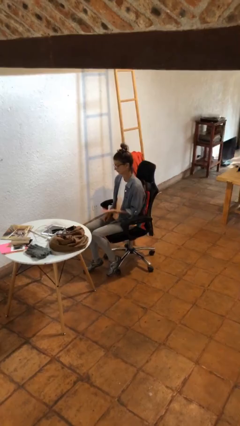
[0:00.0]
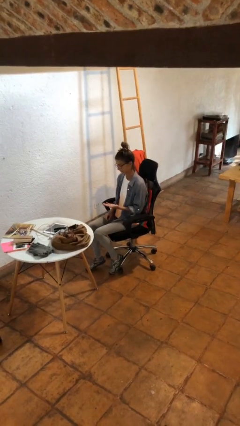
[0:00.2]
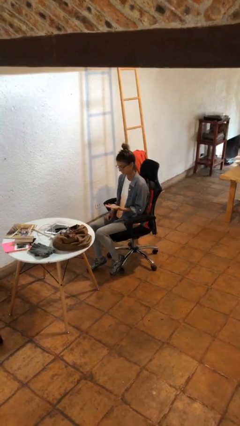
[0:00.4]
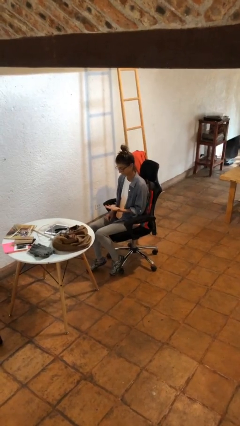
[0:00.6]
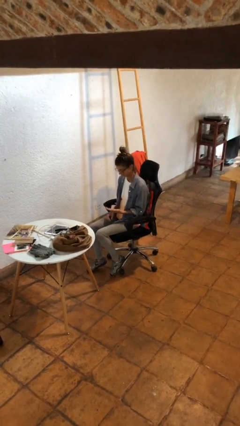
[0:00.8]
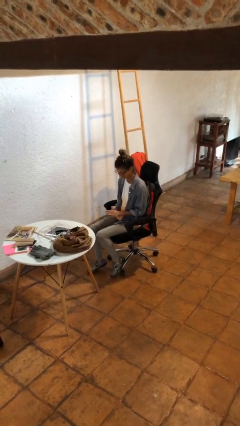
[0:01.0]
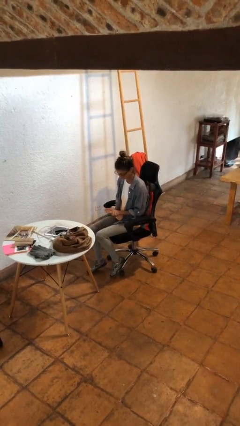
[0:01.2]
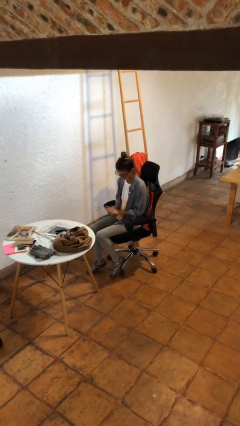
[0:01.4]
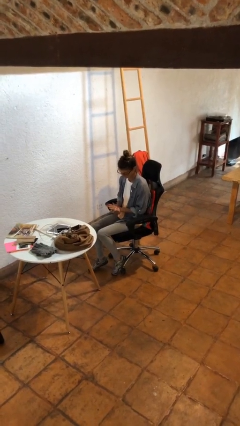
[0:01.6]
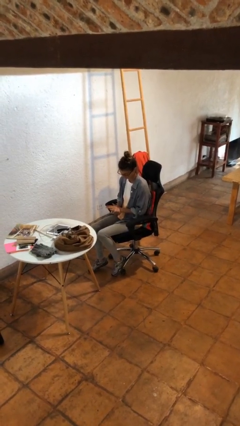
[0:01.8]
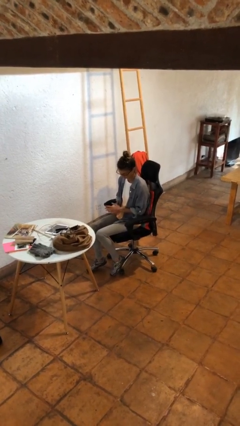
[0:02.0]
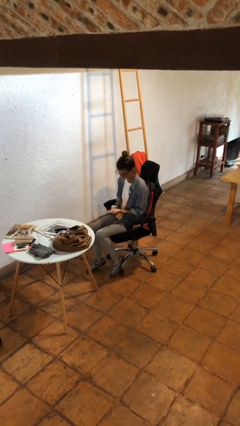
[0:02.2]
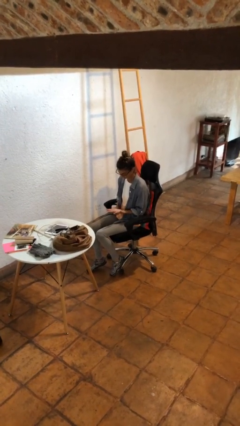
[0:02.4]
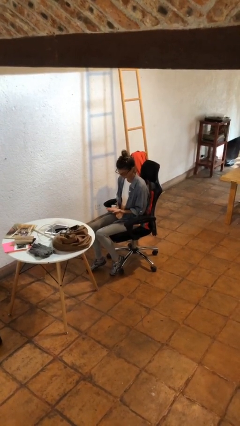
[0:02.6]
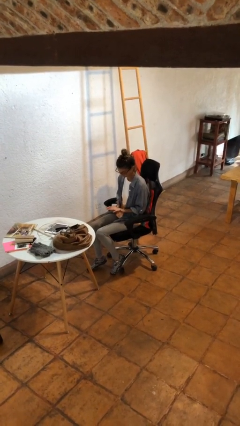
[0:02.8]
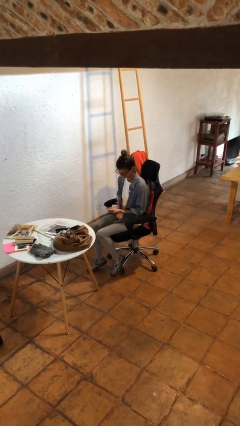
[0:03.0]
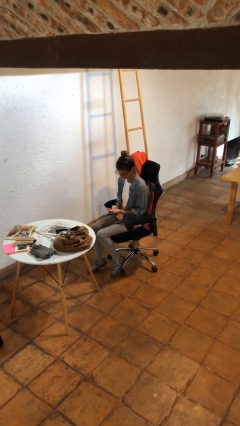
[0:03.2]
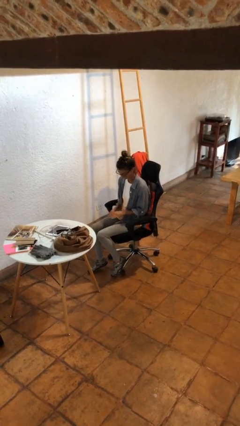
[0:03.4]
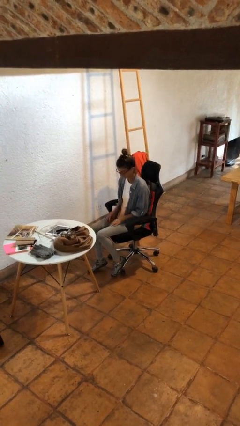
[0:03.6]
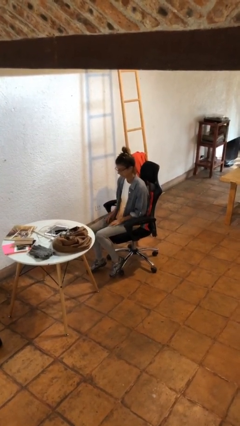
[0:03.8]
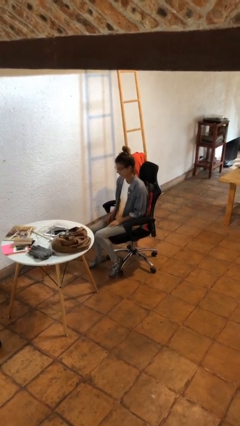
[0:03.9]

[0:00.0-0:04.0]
person looks at hands in lap

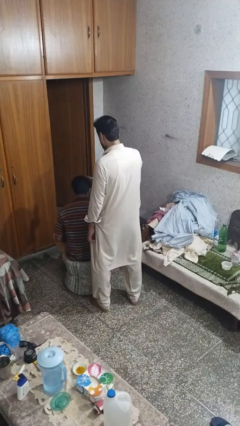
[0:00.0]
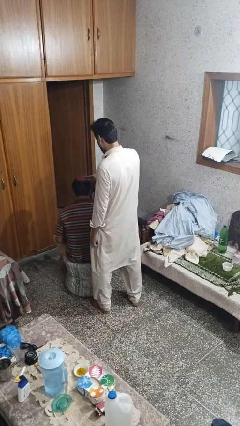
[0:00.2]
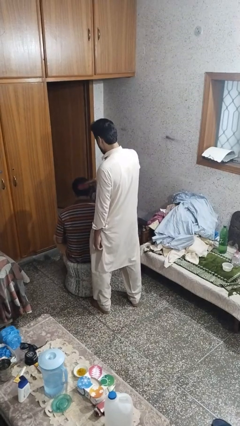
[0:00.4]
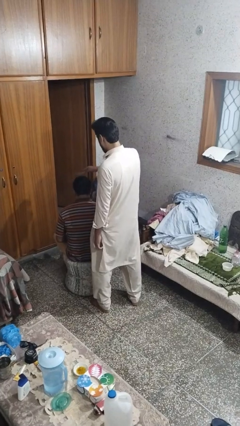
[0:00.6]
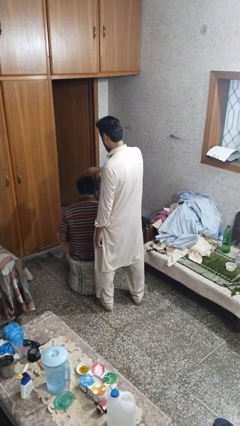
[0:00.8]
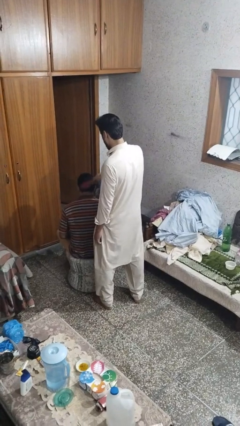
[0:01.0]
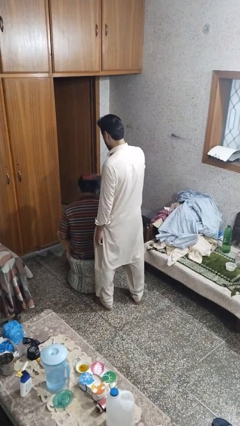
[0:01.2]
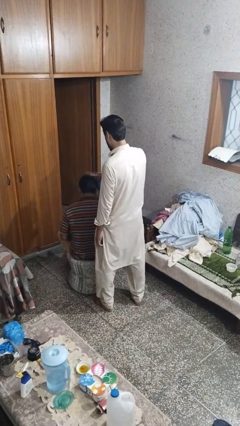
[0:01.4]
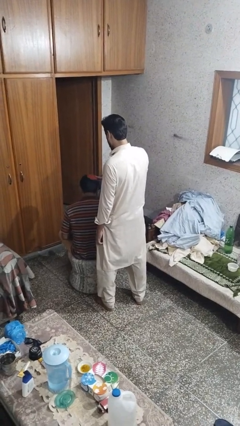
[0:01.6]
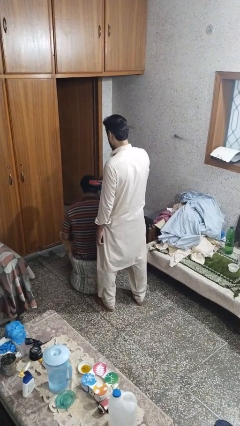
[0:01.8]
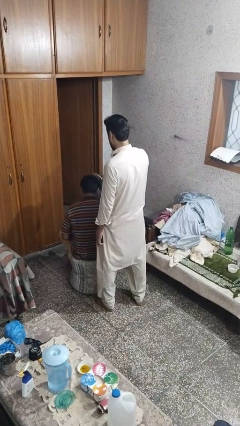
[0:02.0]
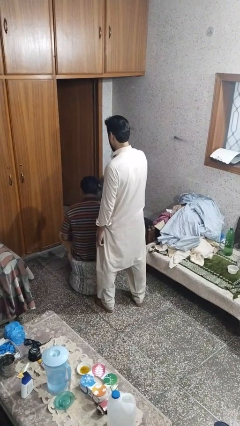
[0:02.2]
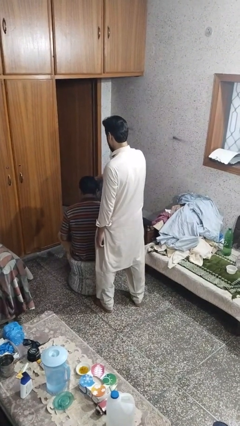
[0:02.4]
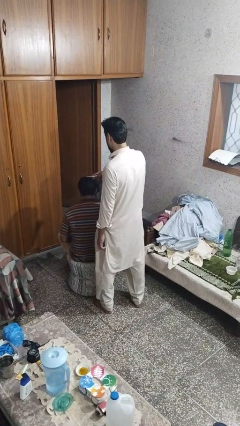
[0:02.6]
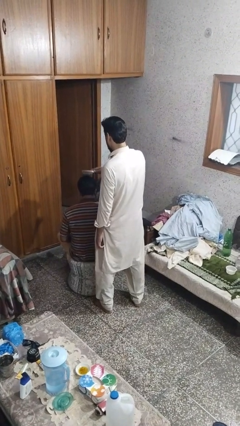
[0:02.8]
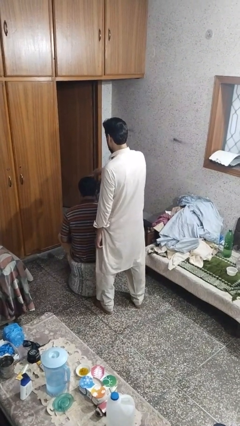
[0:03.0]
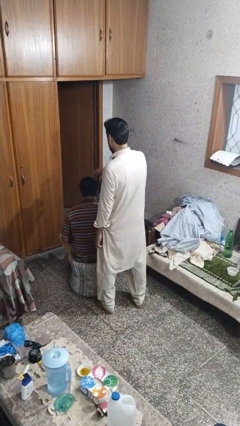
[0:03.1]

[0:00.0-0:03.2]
person brushes hair of person

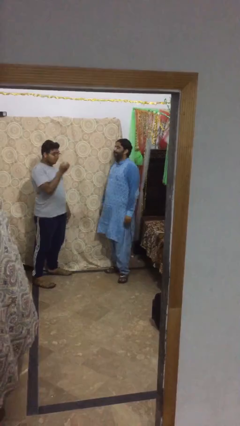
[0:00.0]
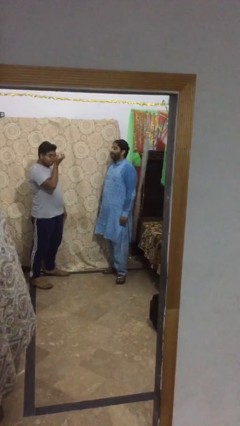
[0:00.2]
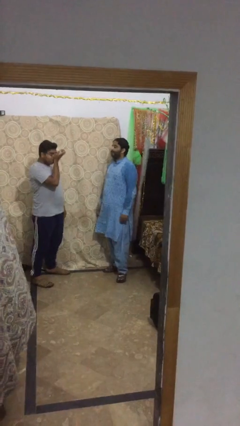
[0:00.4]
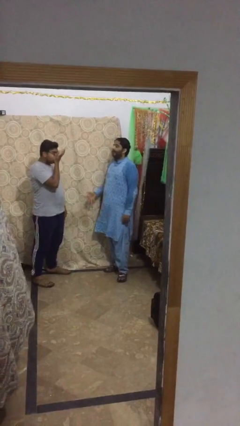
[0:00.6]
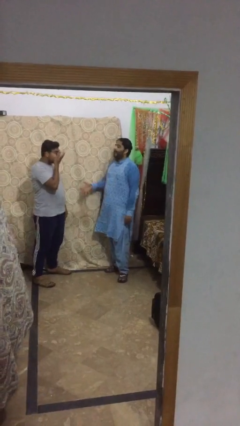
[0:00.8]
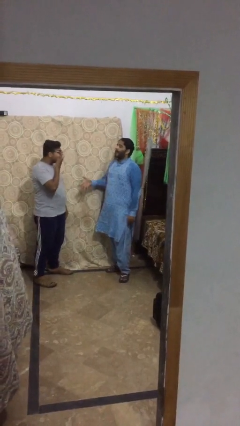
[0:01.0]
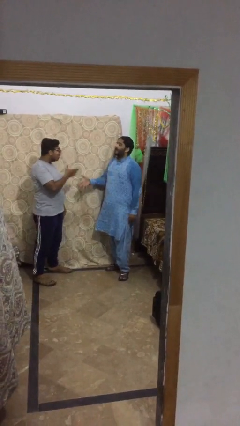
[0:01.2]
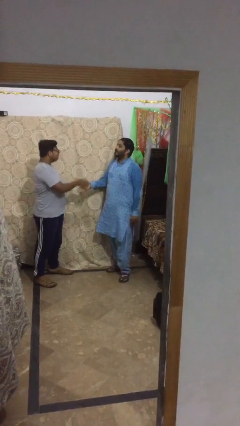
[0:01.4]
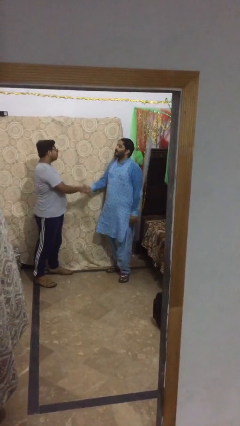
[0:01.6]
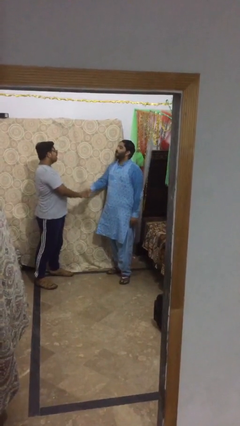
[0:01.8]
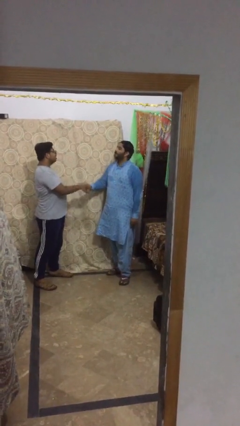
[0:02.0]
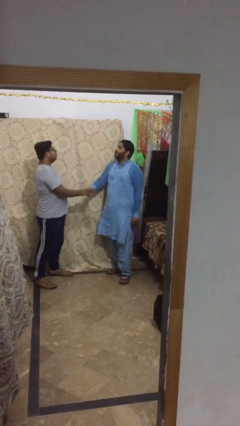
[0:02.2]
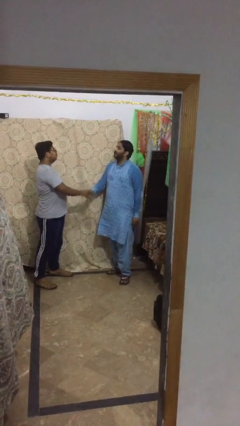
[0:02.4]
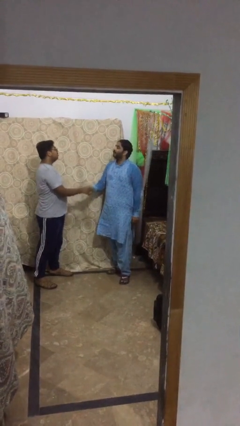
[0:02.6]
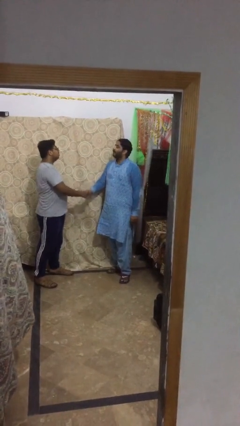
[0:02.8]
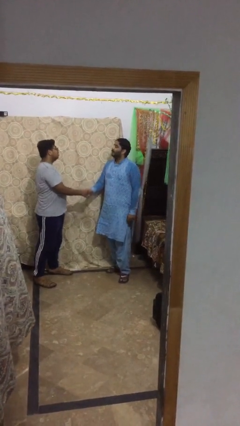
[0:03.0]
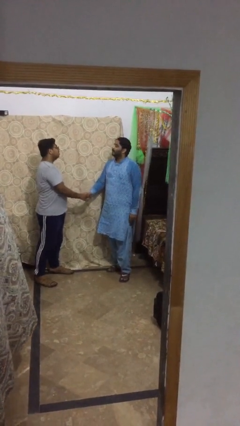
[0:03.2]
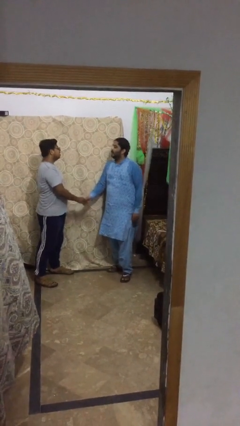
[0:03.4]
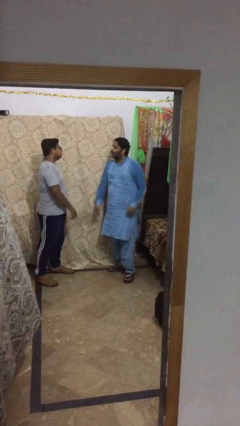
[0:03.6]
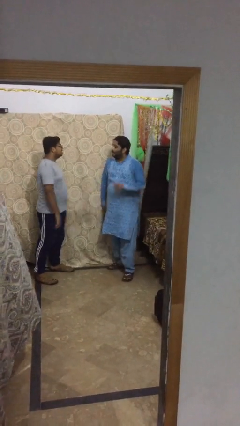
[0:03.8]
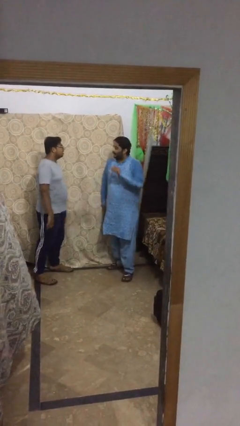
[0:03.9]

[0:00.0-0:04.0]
person shakes hand

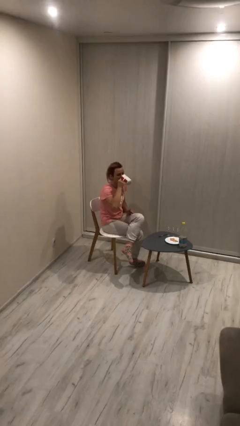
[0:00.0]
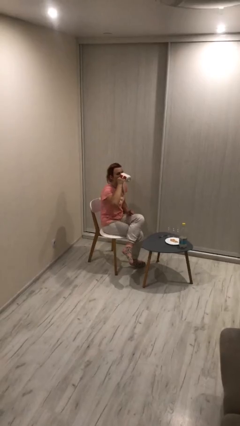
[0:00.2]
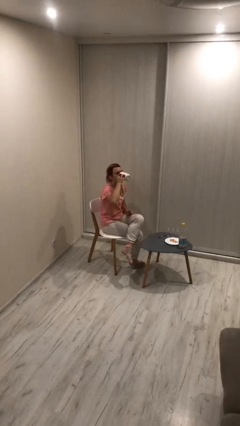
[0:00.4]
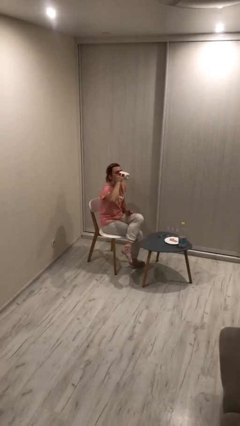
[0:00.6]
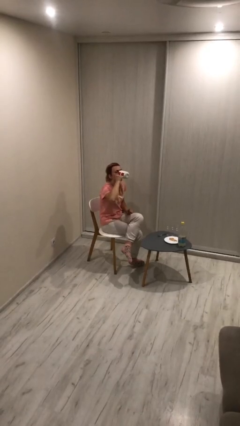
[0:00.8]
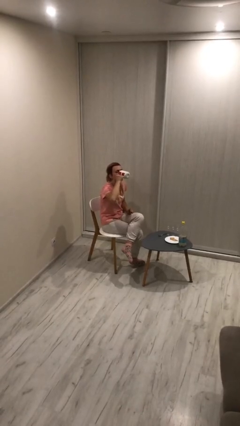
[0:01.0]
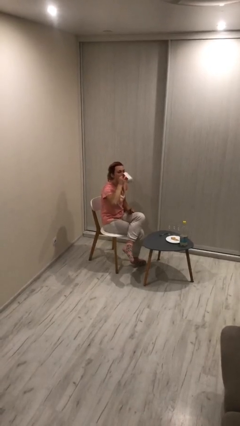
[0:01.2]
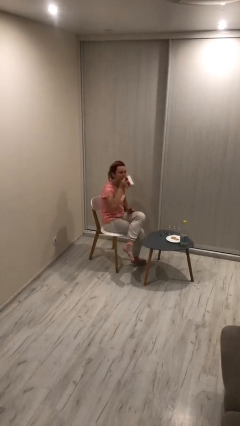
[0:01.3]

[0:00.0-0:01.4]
person drinks from mug

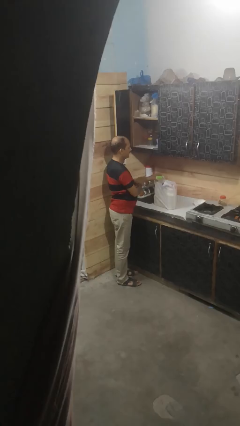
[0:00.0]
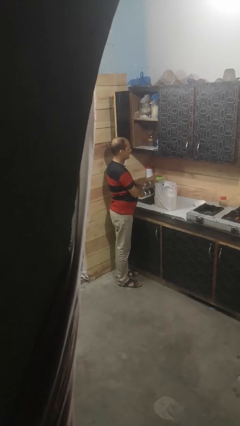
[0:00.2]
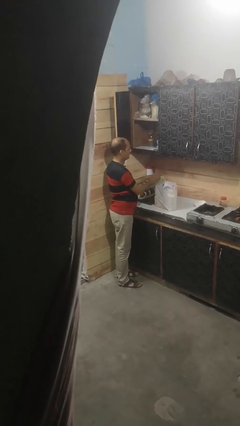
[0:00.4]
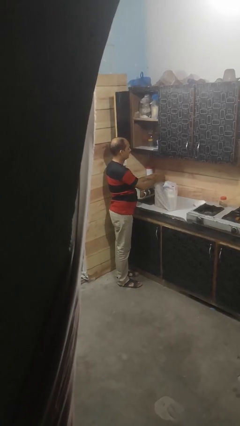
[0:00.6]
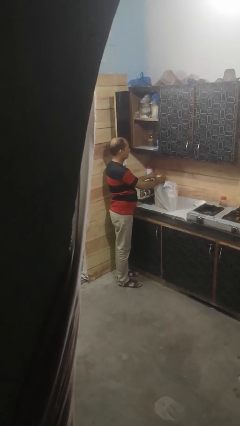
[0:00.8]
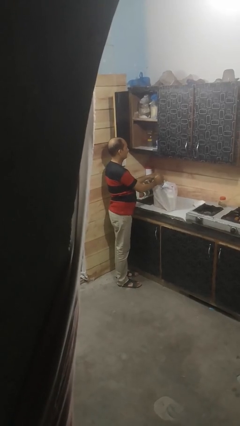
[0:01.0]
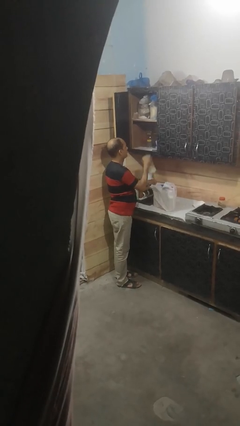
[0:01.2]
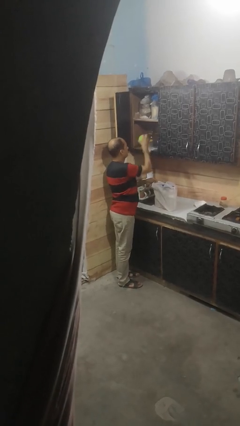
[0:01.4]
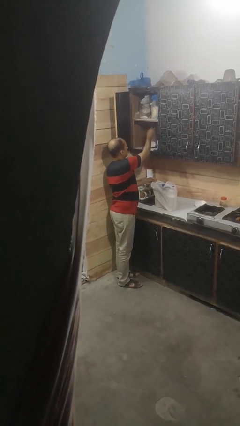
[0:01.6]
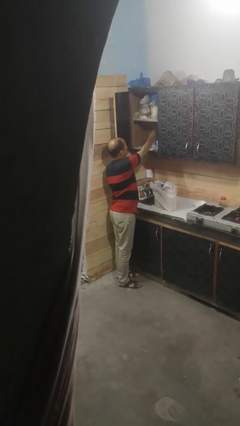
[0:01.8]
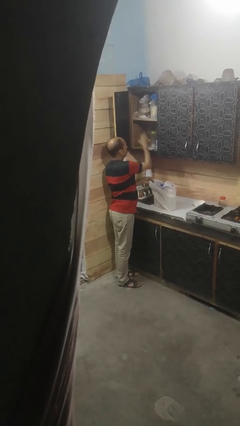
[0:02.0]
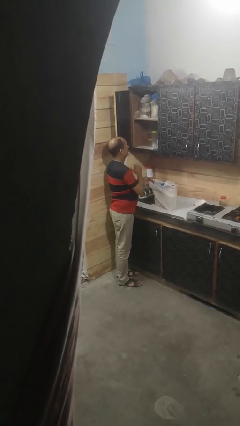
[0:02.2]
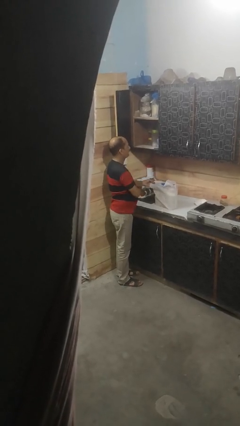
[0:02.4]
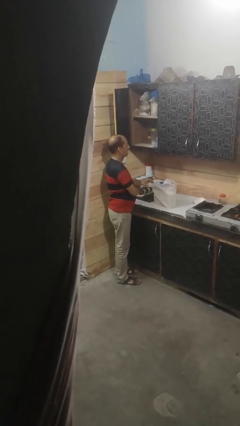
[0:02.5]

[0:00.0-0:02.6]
person loads groceries into cabinet

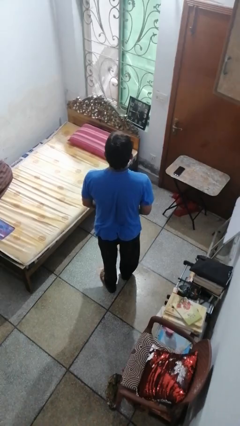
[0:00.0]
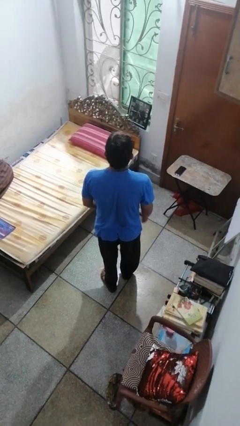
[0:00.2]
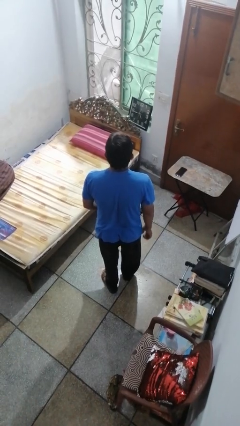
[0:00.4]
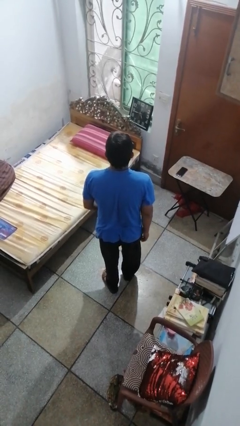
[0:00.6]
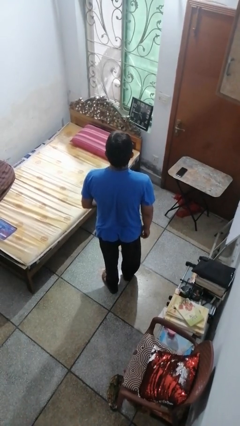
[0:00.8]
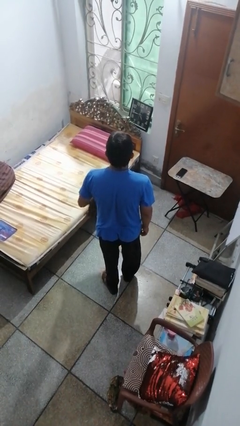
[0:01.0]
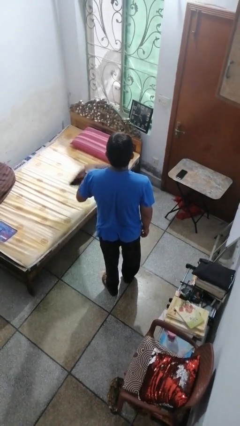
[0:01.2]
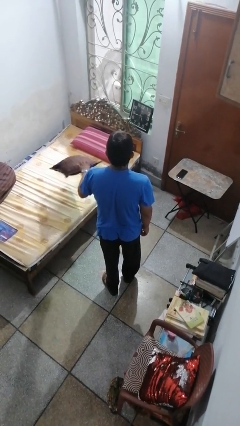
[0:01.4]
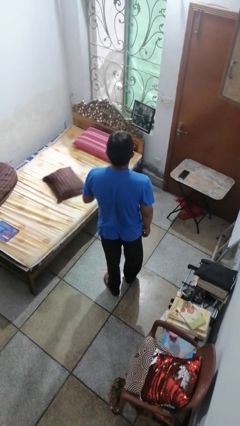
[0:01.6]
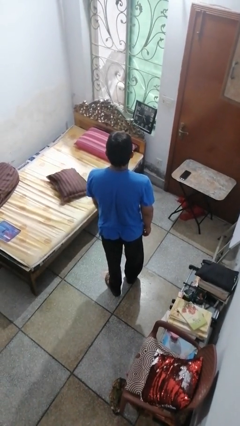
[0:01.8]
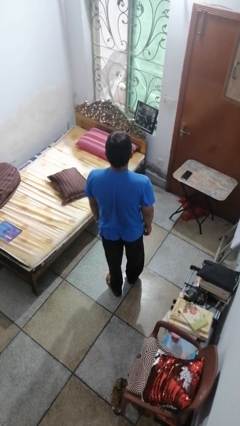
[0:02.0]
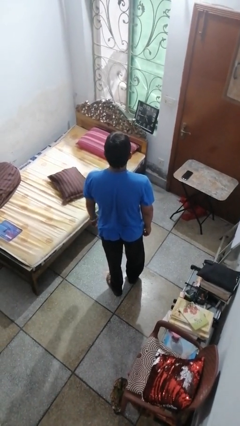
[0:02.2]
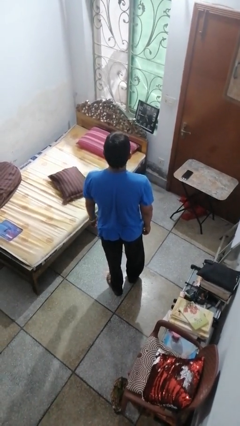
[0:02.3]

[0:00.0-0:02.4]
person throws object on bed

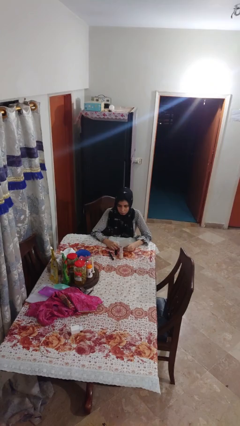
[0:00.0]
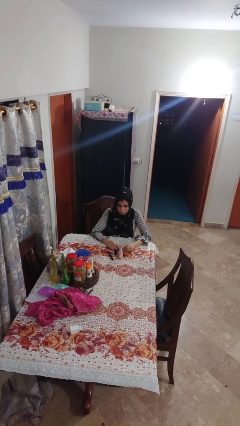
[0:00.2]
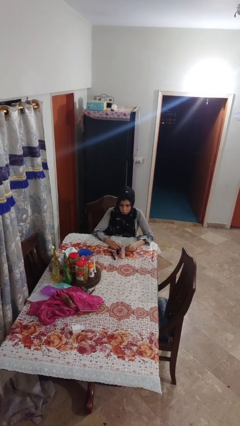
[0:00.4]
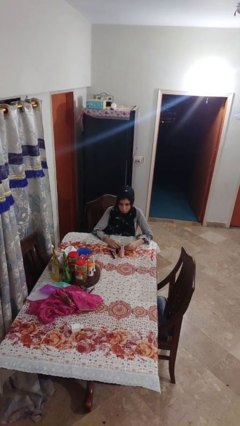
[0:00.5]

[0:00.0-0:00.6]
person applies lip makeup
